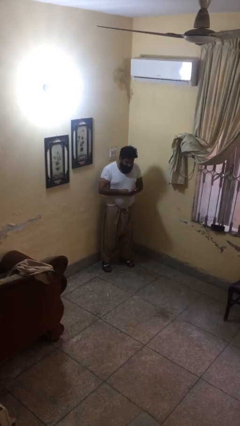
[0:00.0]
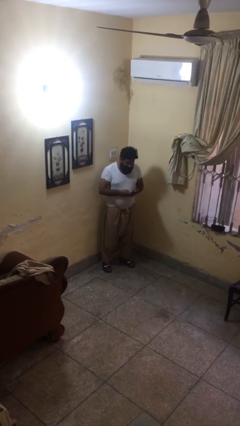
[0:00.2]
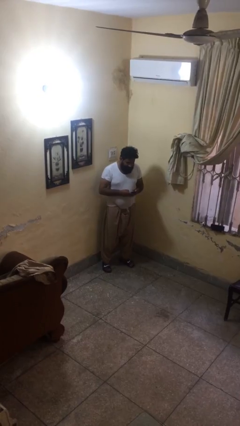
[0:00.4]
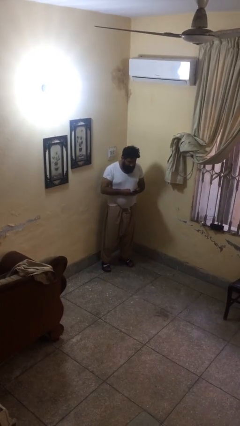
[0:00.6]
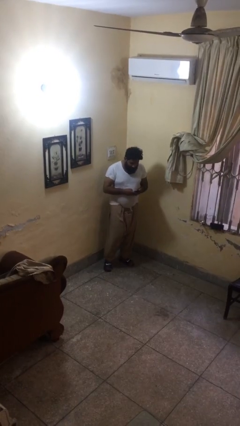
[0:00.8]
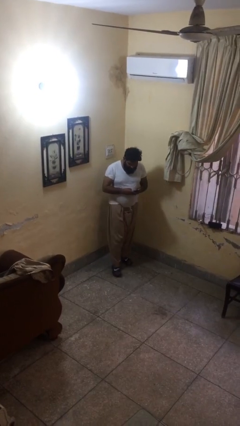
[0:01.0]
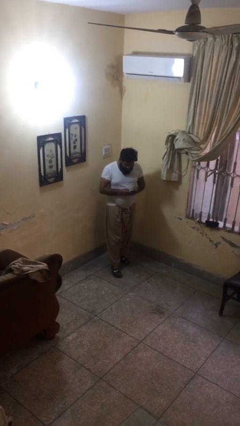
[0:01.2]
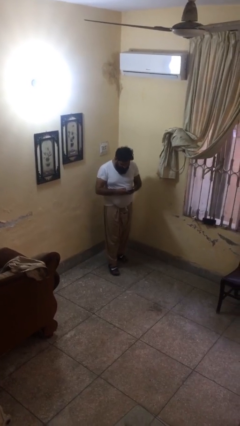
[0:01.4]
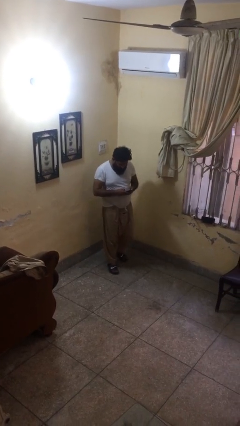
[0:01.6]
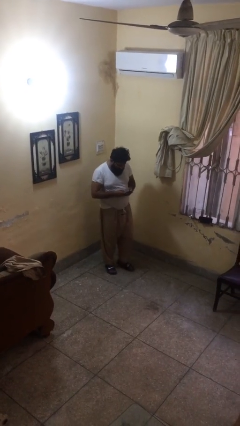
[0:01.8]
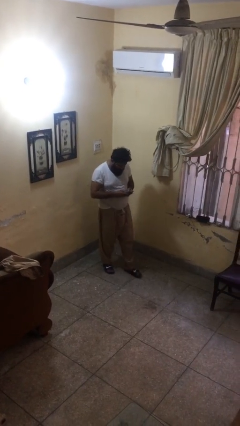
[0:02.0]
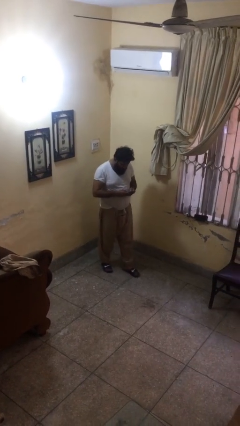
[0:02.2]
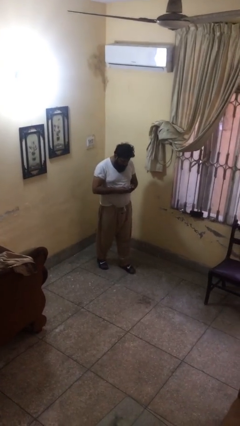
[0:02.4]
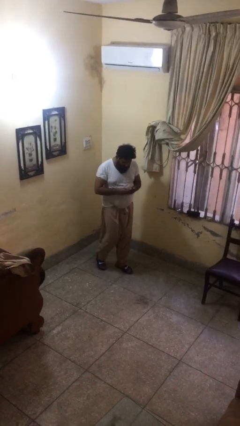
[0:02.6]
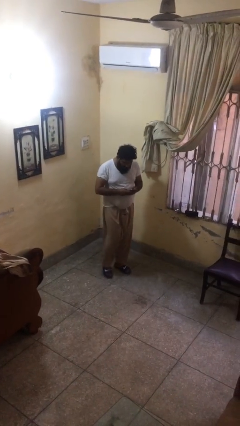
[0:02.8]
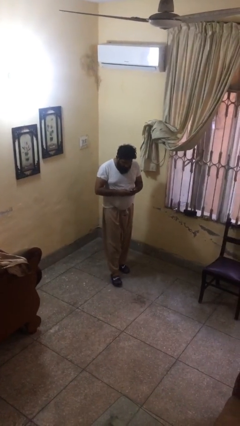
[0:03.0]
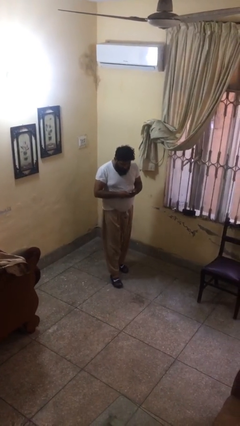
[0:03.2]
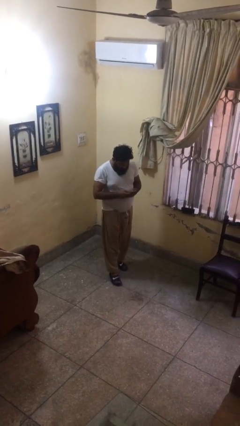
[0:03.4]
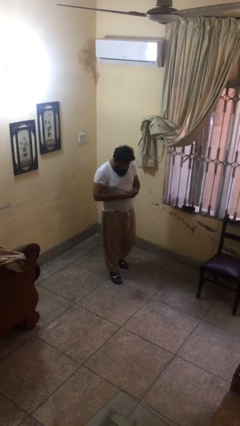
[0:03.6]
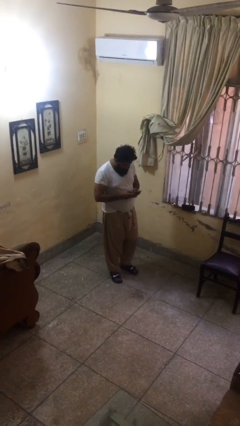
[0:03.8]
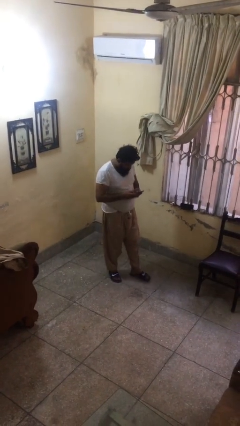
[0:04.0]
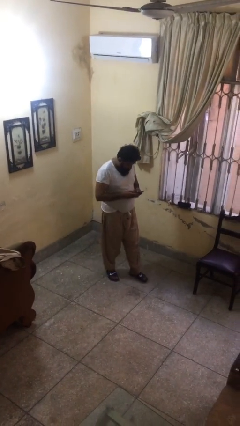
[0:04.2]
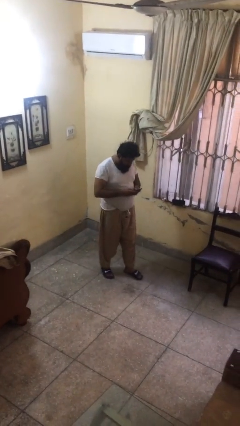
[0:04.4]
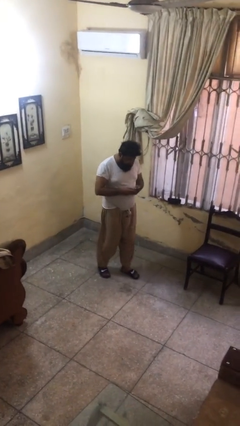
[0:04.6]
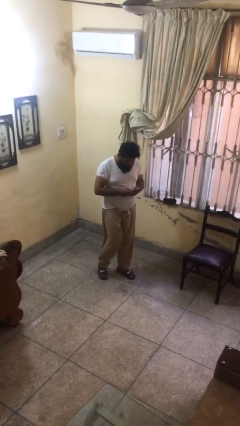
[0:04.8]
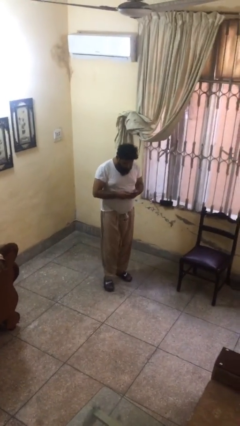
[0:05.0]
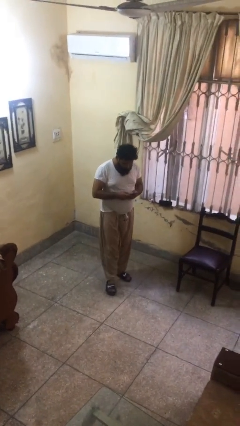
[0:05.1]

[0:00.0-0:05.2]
person texts on phone

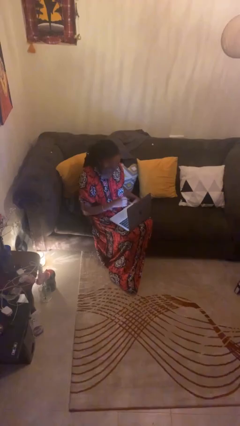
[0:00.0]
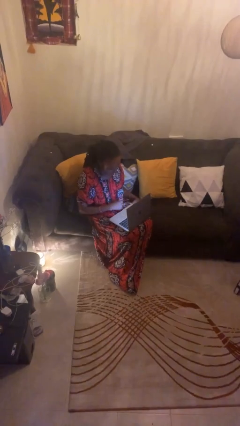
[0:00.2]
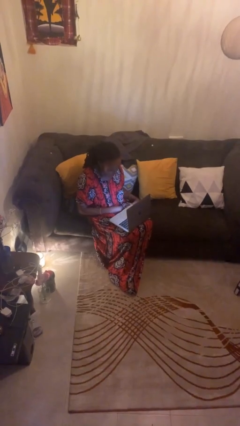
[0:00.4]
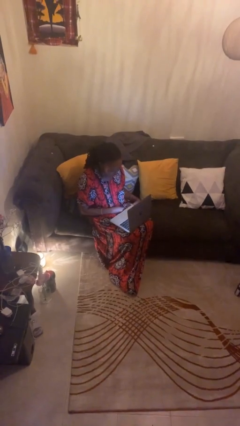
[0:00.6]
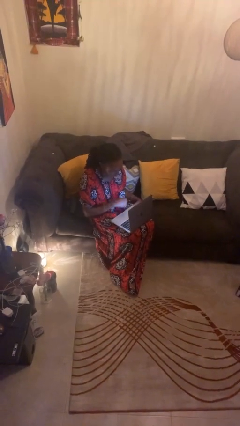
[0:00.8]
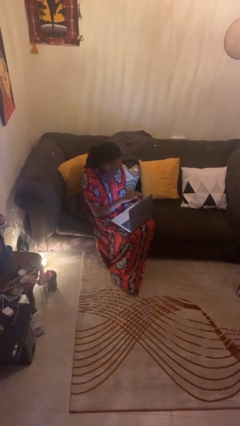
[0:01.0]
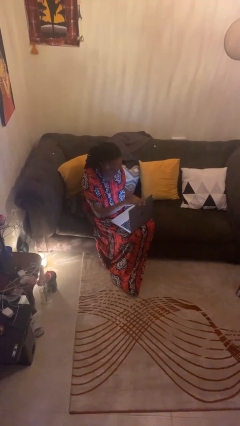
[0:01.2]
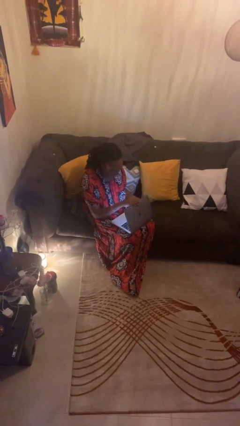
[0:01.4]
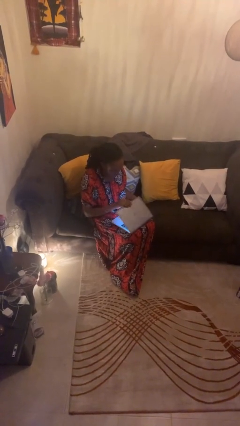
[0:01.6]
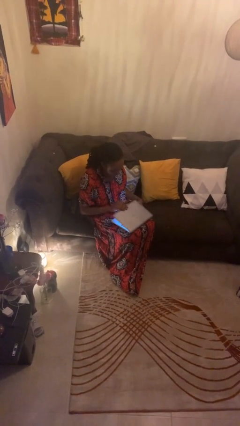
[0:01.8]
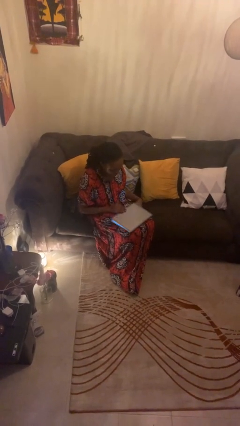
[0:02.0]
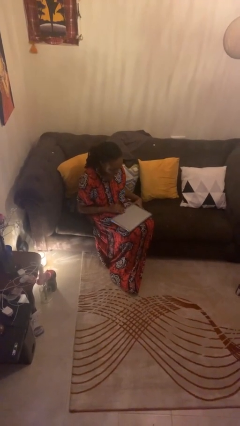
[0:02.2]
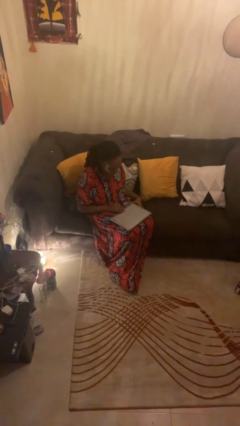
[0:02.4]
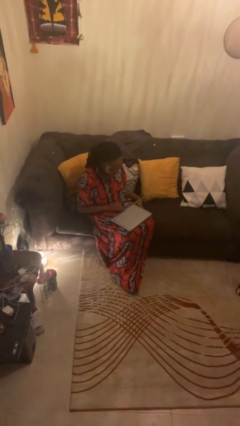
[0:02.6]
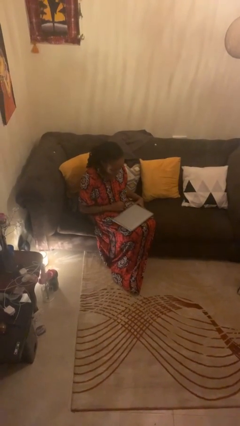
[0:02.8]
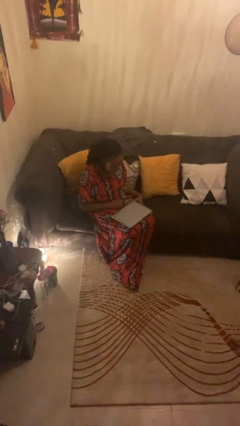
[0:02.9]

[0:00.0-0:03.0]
person closes laptop

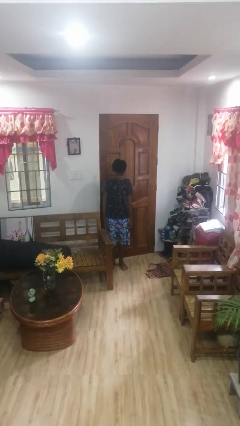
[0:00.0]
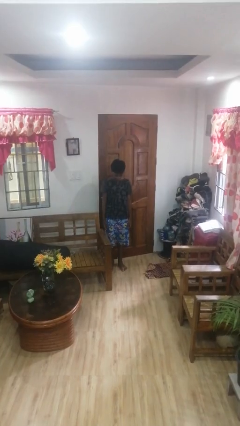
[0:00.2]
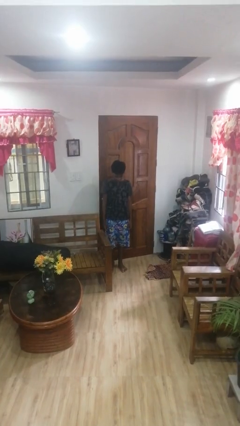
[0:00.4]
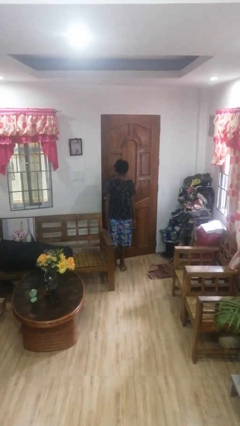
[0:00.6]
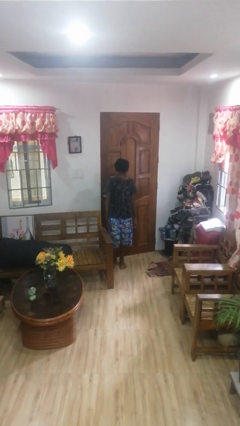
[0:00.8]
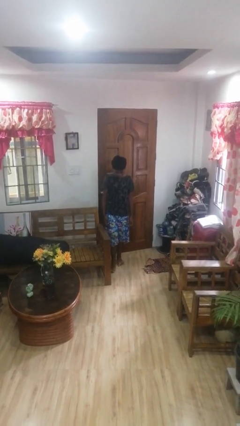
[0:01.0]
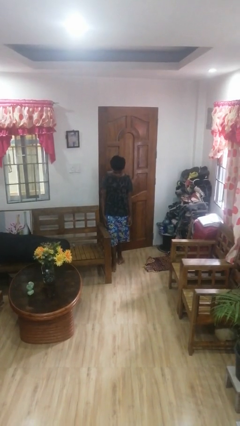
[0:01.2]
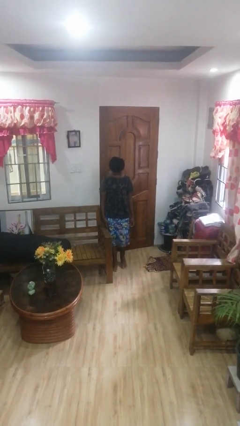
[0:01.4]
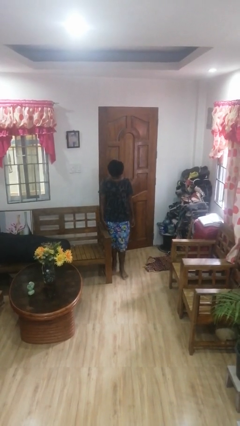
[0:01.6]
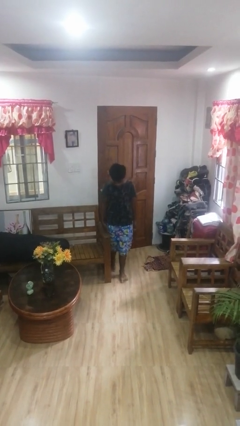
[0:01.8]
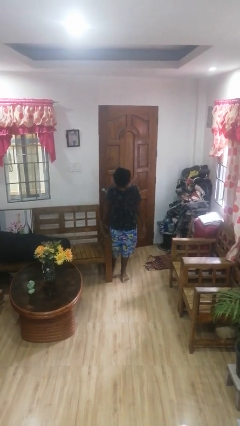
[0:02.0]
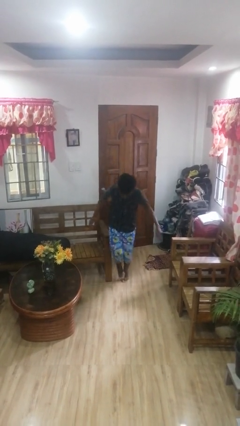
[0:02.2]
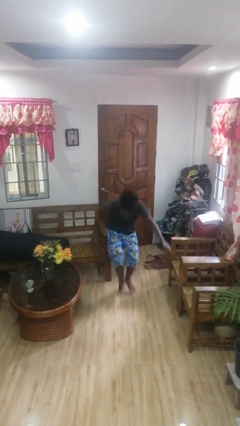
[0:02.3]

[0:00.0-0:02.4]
person trips on object on floor

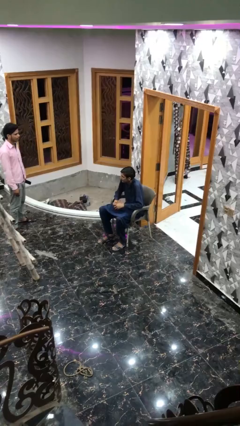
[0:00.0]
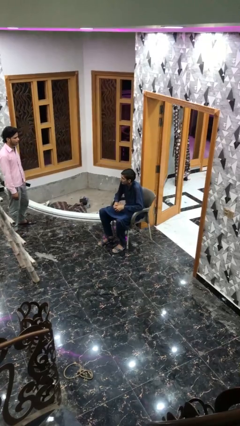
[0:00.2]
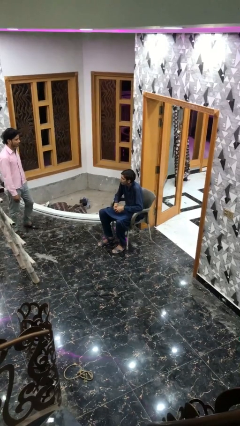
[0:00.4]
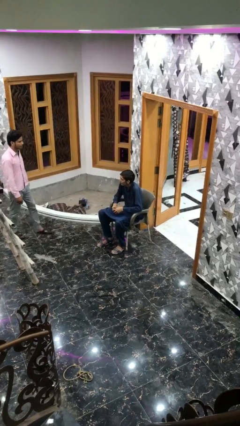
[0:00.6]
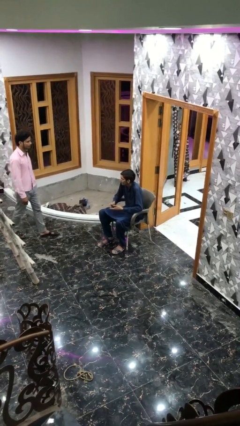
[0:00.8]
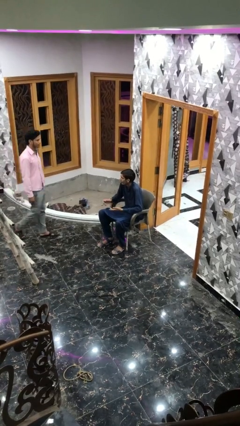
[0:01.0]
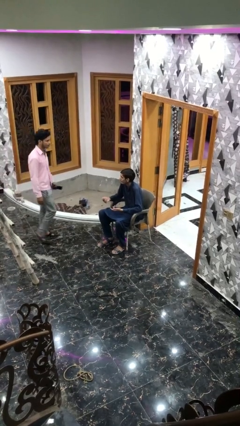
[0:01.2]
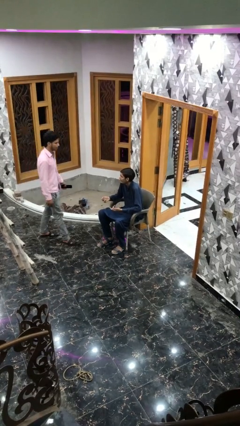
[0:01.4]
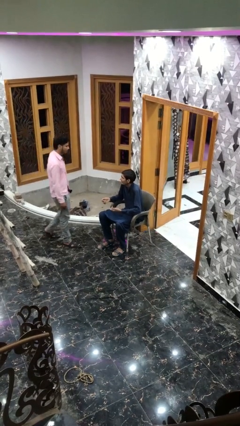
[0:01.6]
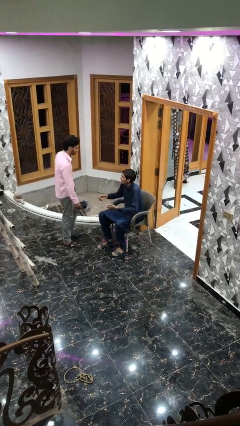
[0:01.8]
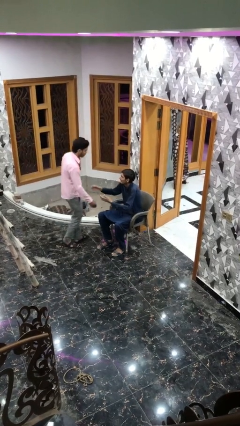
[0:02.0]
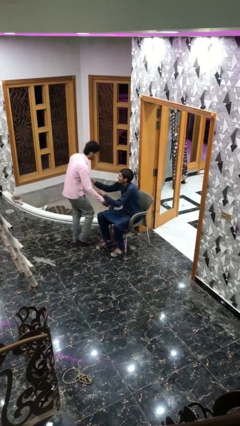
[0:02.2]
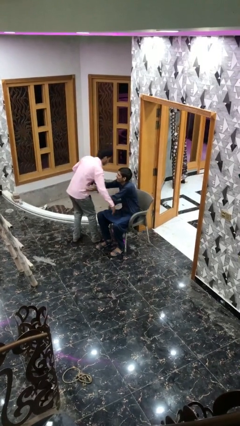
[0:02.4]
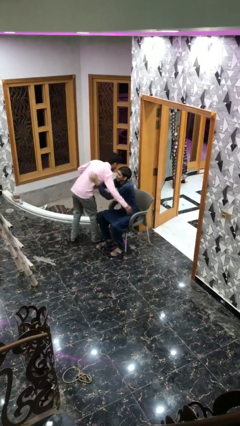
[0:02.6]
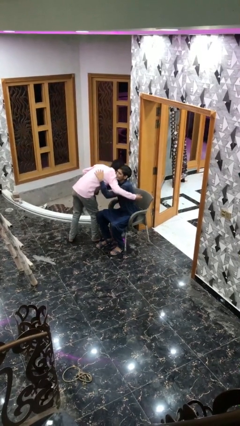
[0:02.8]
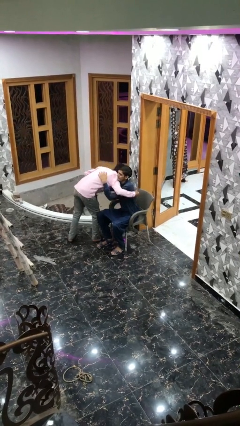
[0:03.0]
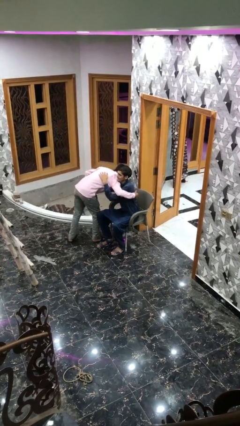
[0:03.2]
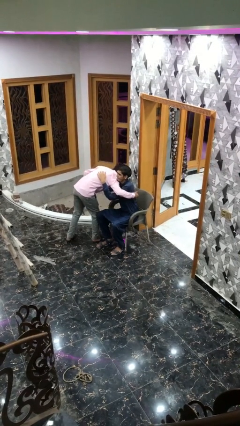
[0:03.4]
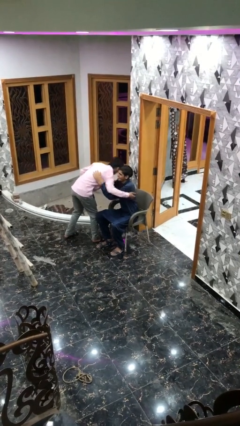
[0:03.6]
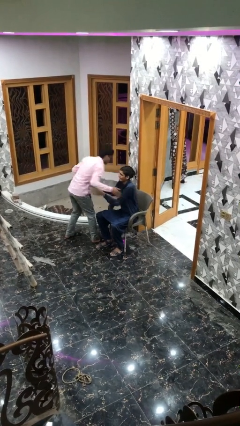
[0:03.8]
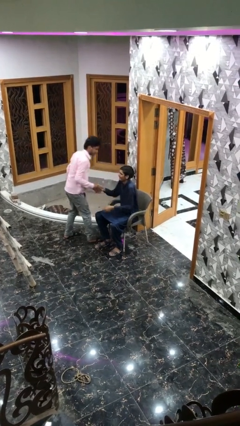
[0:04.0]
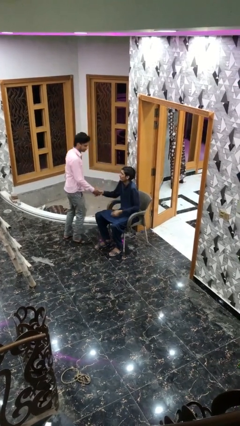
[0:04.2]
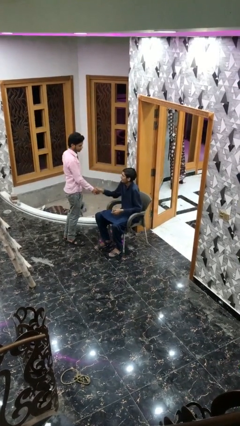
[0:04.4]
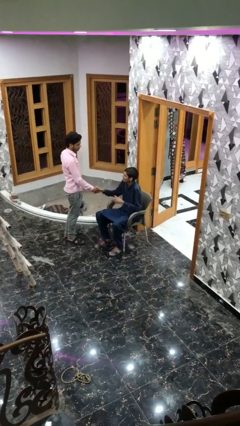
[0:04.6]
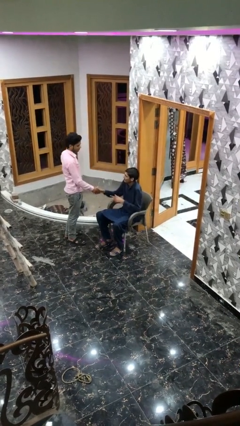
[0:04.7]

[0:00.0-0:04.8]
person embraces person

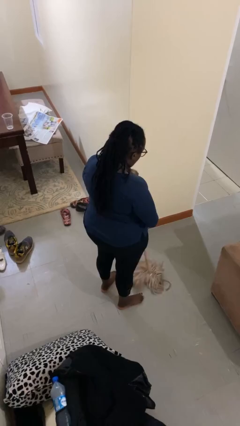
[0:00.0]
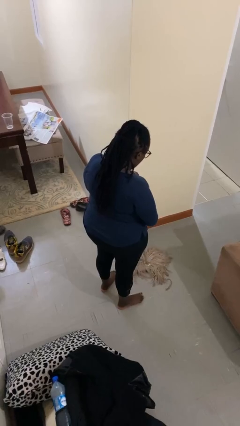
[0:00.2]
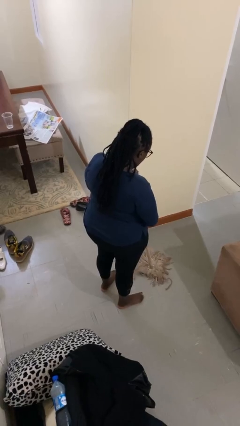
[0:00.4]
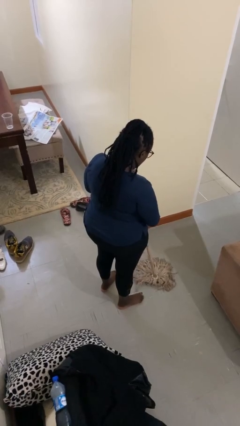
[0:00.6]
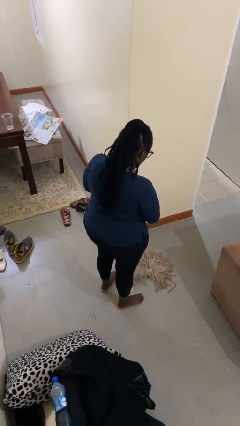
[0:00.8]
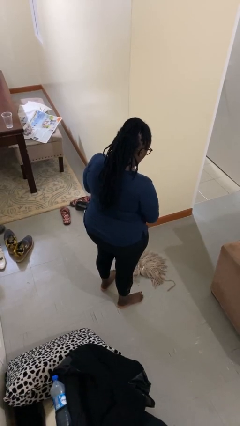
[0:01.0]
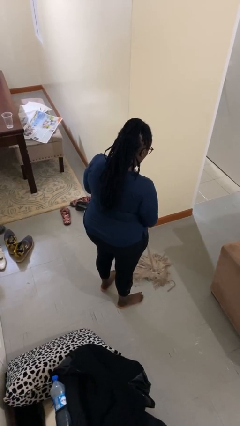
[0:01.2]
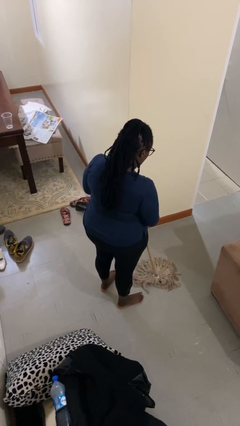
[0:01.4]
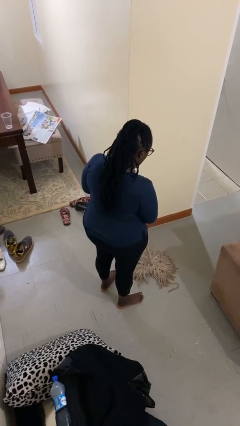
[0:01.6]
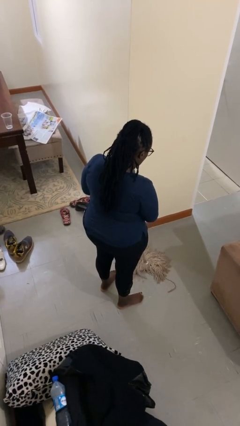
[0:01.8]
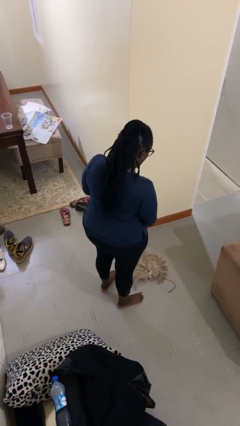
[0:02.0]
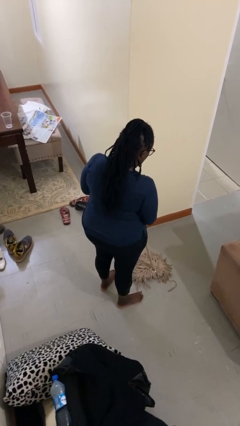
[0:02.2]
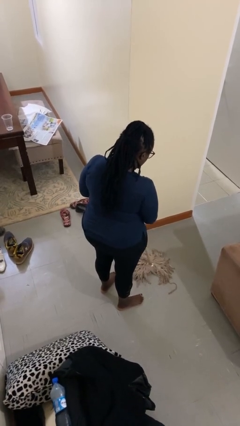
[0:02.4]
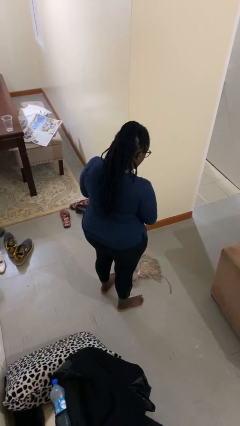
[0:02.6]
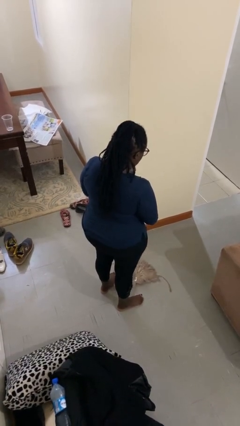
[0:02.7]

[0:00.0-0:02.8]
person mops
